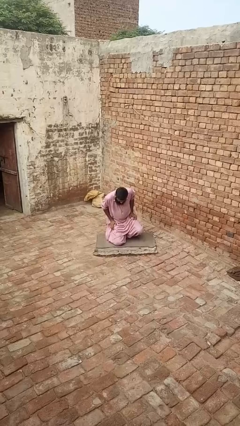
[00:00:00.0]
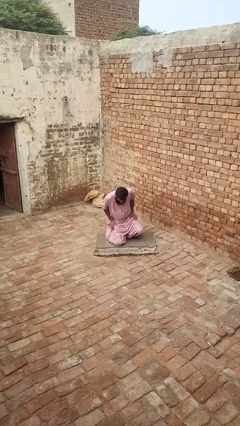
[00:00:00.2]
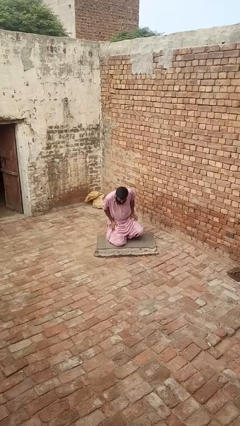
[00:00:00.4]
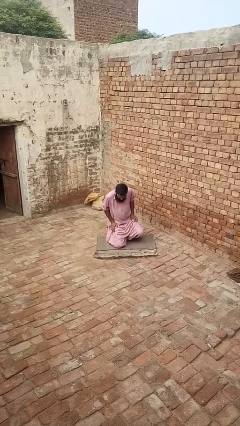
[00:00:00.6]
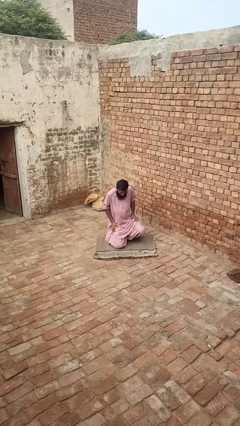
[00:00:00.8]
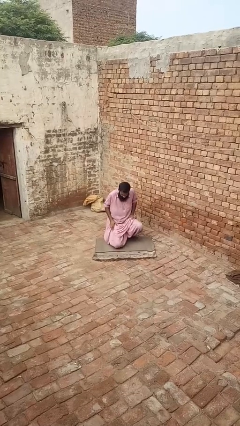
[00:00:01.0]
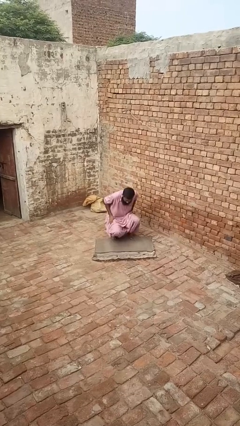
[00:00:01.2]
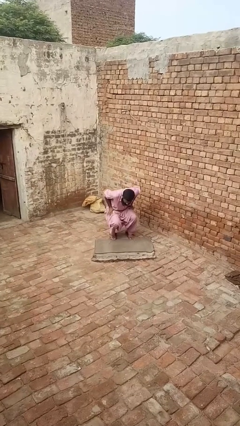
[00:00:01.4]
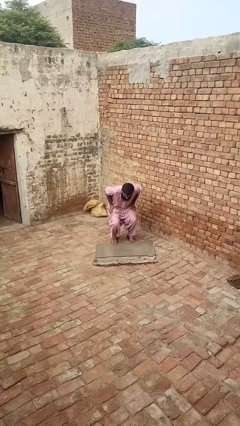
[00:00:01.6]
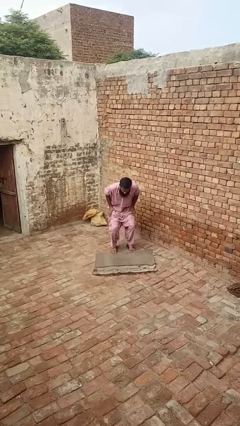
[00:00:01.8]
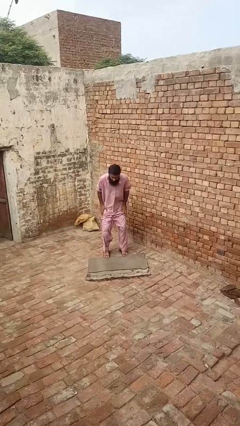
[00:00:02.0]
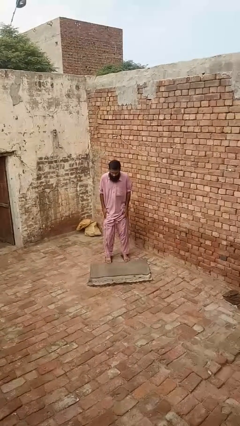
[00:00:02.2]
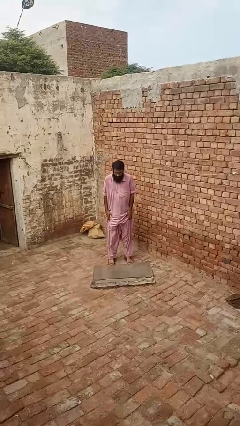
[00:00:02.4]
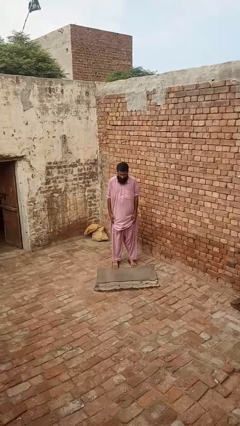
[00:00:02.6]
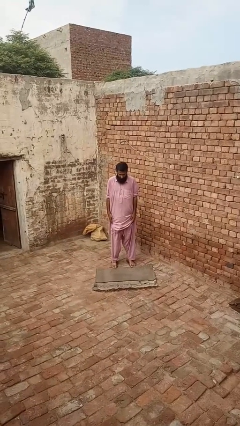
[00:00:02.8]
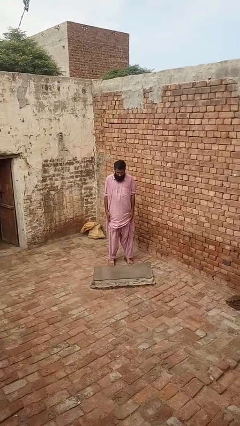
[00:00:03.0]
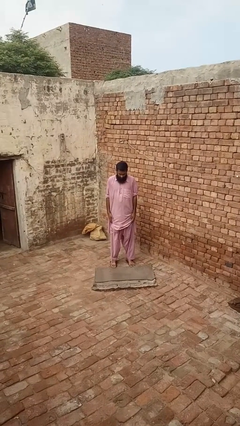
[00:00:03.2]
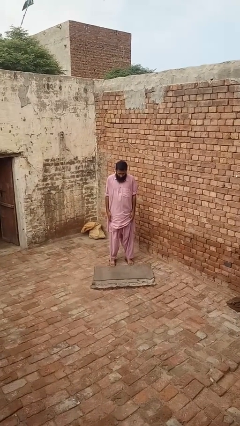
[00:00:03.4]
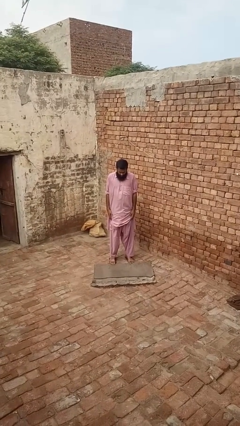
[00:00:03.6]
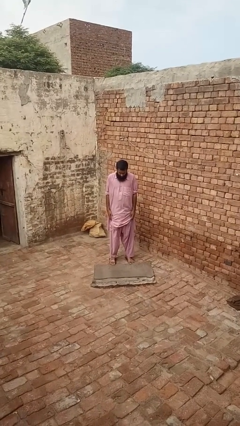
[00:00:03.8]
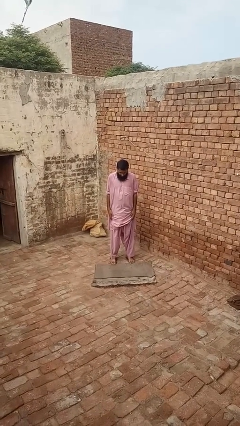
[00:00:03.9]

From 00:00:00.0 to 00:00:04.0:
person stands up from floor

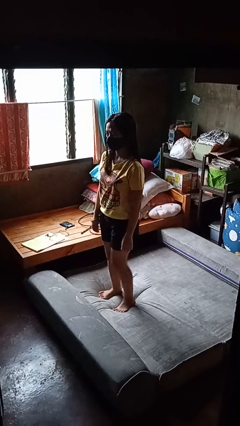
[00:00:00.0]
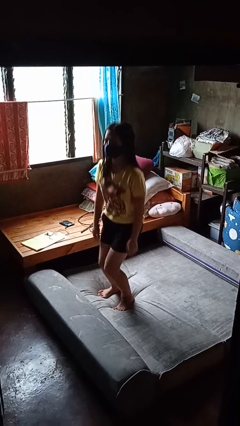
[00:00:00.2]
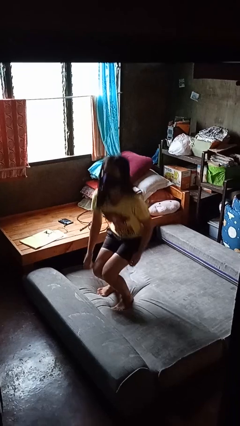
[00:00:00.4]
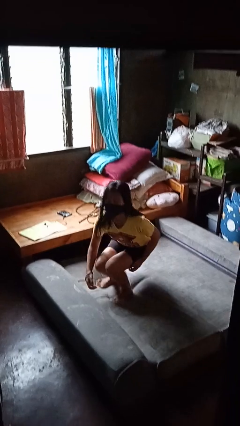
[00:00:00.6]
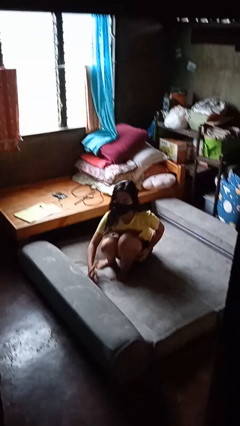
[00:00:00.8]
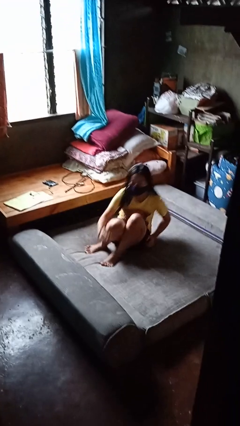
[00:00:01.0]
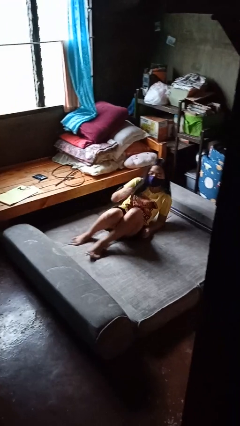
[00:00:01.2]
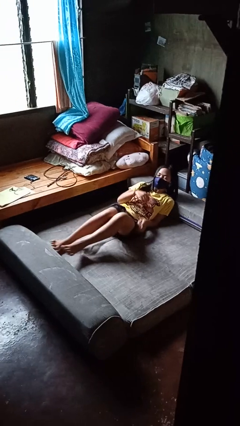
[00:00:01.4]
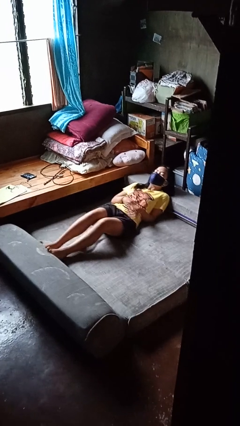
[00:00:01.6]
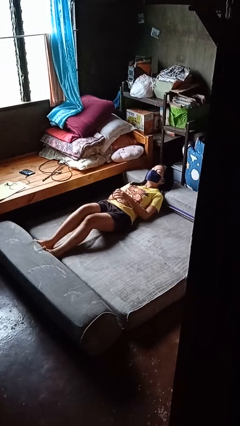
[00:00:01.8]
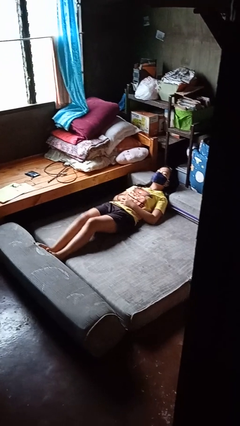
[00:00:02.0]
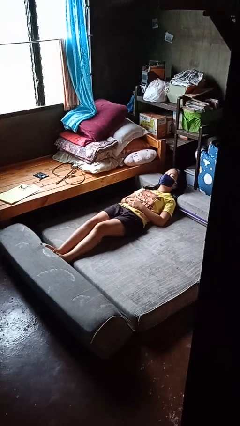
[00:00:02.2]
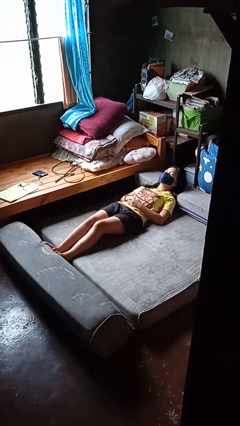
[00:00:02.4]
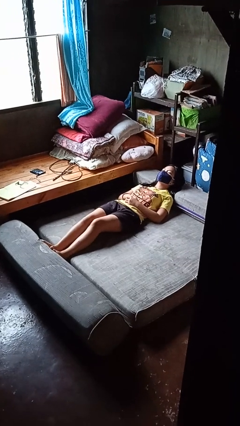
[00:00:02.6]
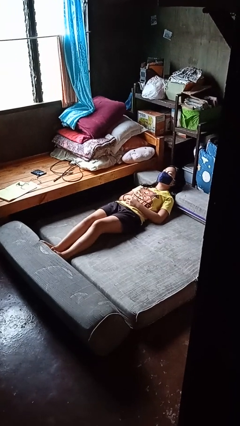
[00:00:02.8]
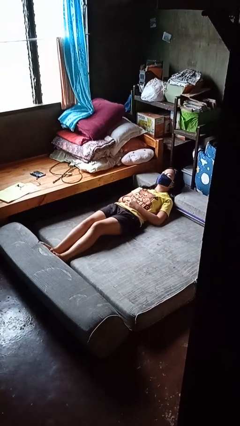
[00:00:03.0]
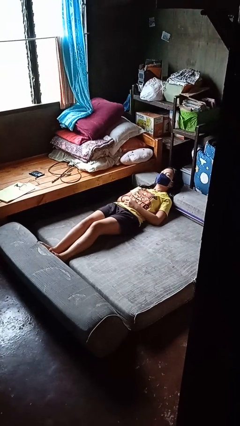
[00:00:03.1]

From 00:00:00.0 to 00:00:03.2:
person lies down on bed

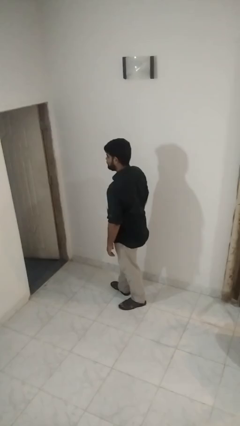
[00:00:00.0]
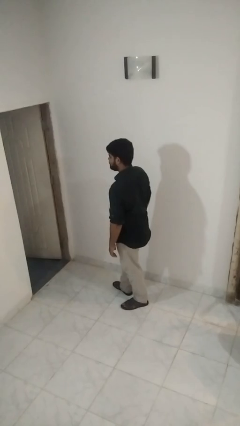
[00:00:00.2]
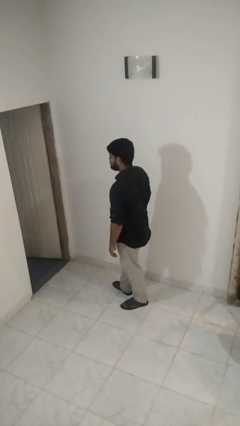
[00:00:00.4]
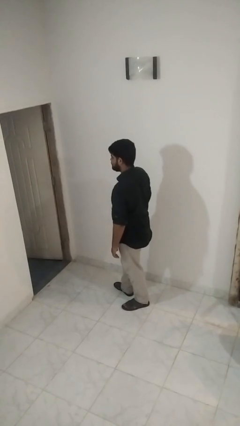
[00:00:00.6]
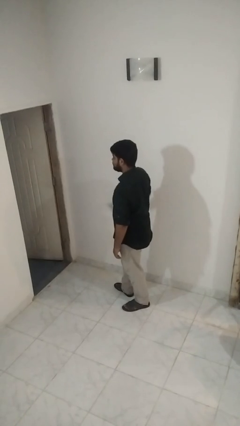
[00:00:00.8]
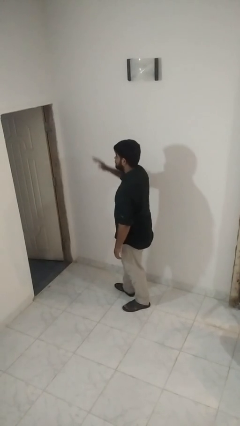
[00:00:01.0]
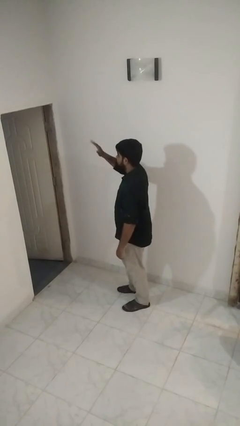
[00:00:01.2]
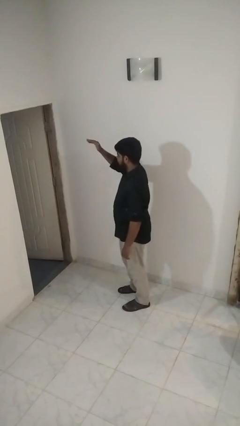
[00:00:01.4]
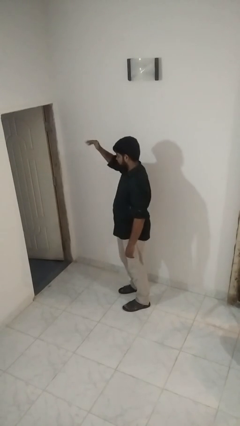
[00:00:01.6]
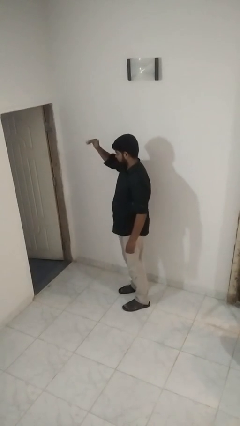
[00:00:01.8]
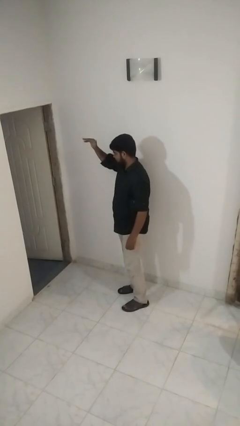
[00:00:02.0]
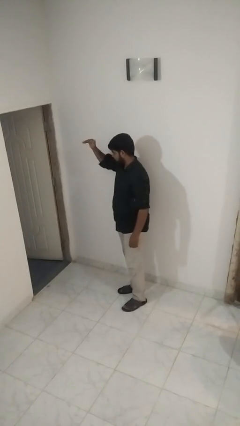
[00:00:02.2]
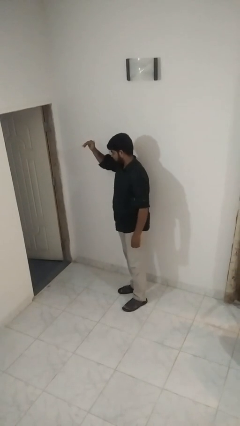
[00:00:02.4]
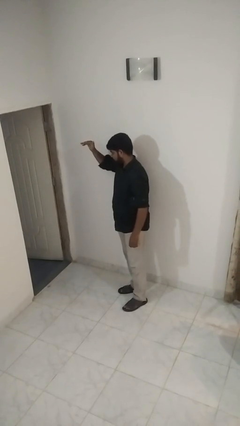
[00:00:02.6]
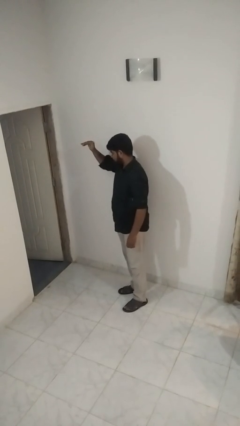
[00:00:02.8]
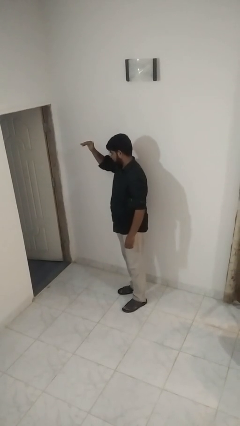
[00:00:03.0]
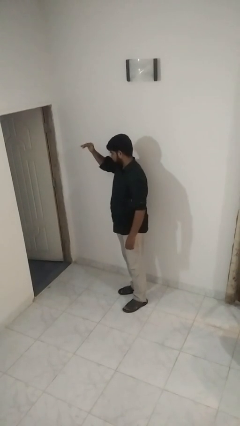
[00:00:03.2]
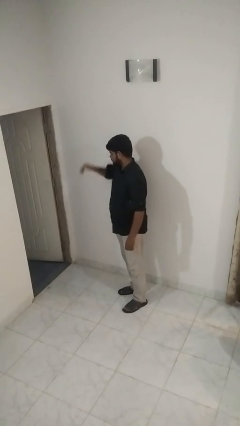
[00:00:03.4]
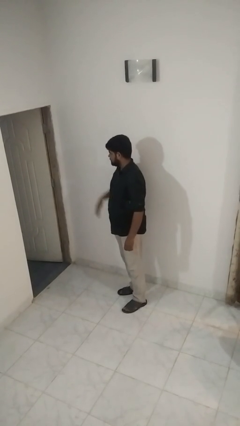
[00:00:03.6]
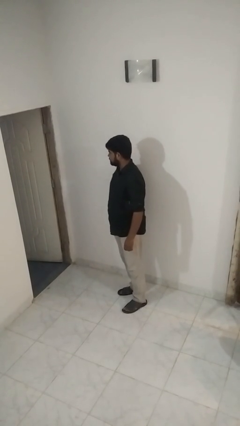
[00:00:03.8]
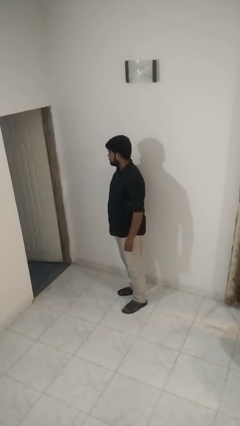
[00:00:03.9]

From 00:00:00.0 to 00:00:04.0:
person gestures come here

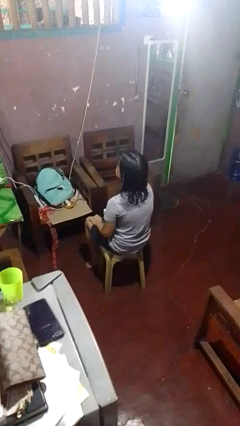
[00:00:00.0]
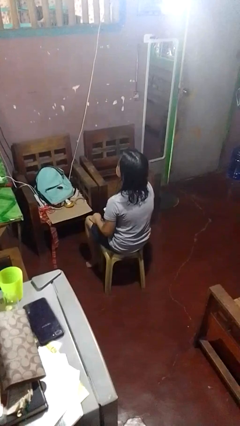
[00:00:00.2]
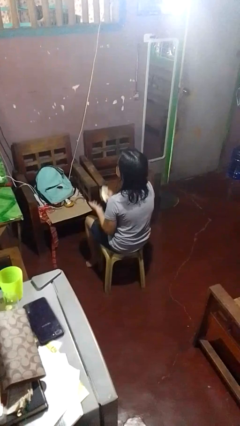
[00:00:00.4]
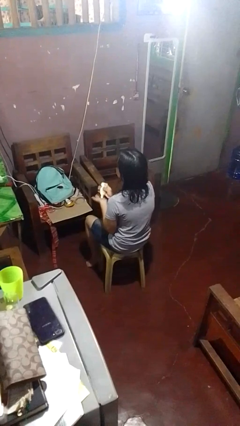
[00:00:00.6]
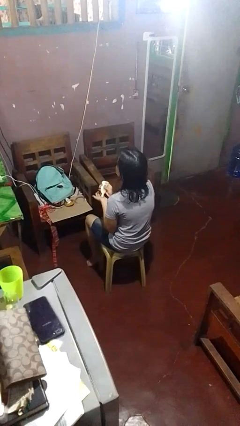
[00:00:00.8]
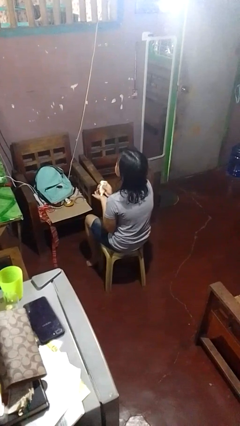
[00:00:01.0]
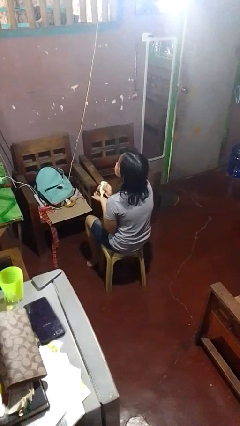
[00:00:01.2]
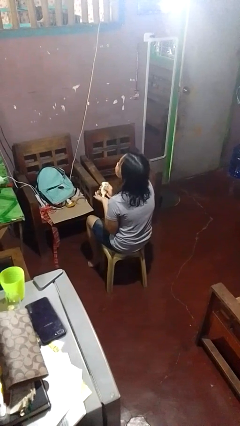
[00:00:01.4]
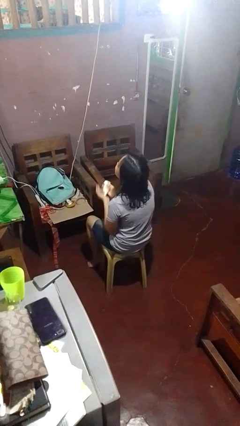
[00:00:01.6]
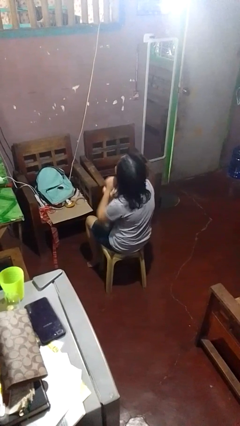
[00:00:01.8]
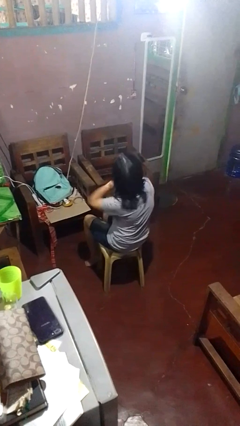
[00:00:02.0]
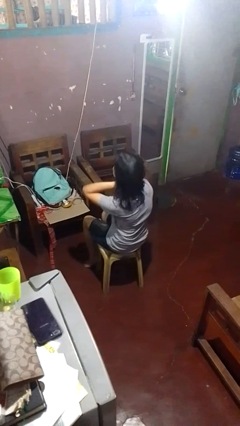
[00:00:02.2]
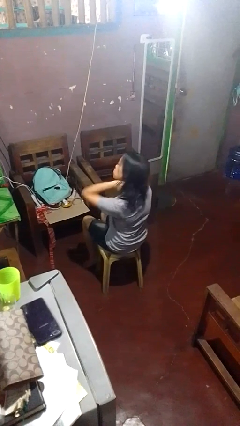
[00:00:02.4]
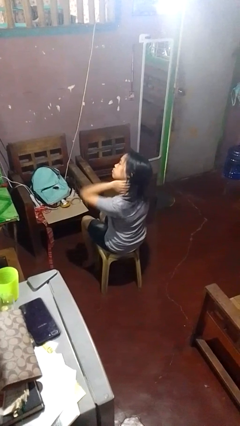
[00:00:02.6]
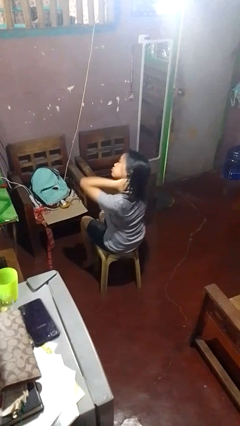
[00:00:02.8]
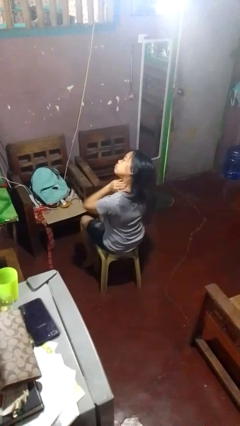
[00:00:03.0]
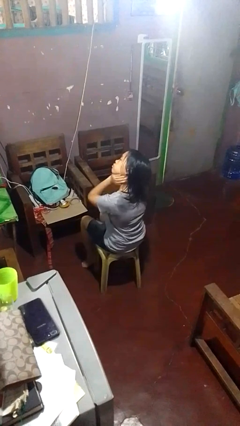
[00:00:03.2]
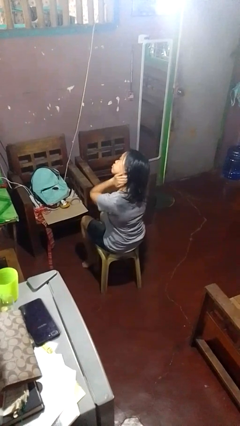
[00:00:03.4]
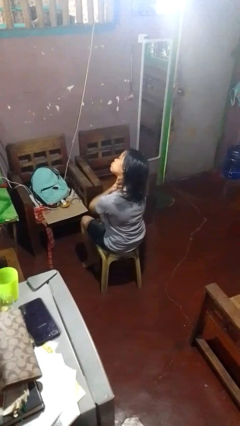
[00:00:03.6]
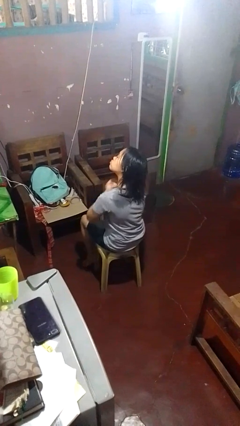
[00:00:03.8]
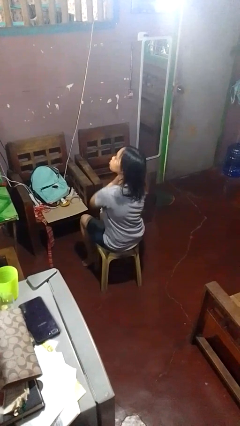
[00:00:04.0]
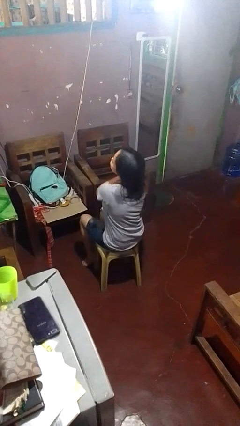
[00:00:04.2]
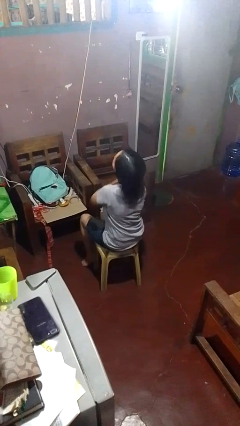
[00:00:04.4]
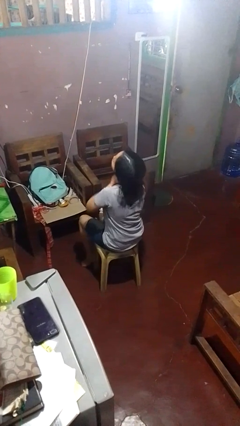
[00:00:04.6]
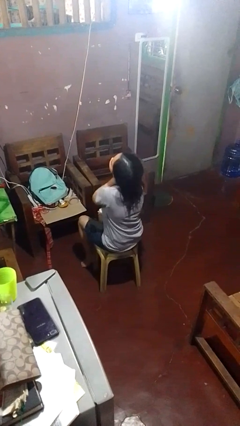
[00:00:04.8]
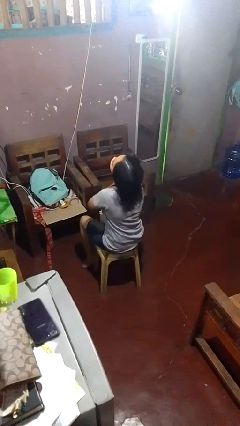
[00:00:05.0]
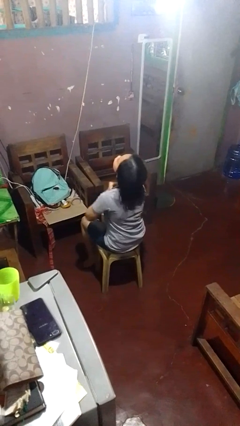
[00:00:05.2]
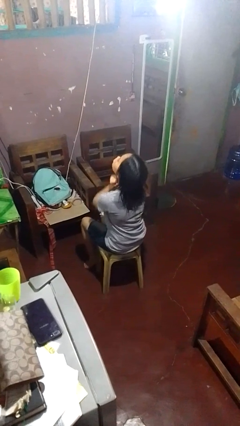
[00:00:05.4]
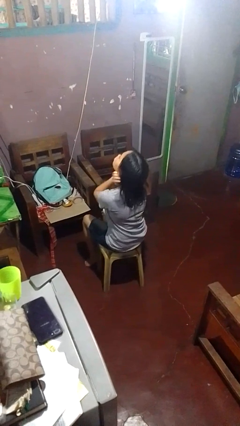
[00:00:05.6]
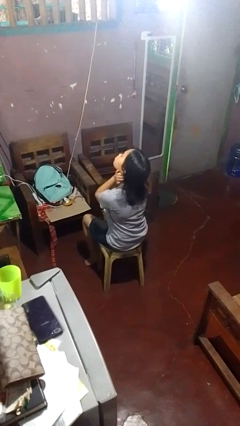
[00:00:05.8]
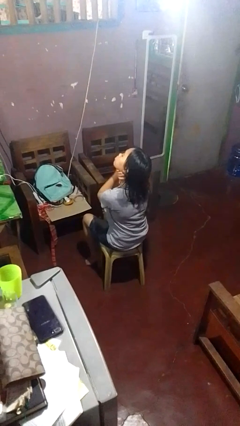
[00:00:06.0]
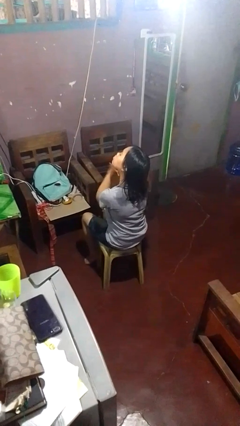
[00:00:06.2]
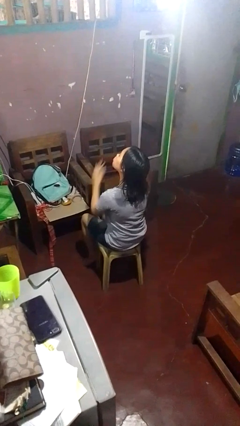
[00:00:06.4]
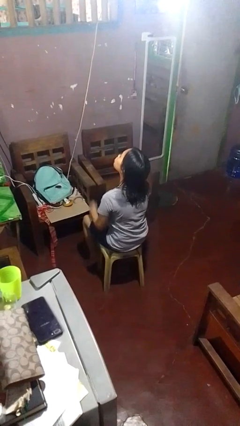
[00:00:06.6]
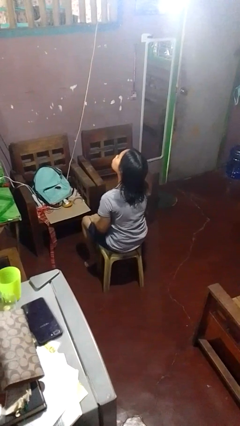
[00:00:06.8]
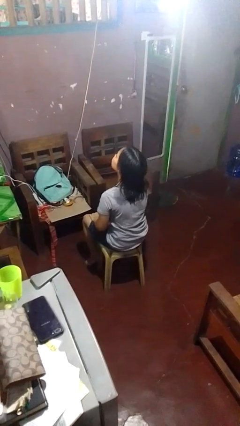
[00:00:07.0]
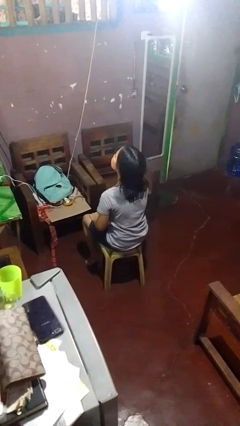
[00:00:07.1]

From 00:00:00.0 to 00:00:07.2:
person applies sunscreen
